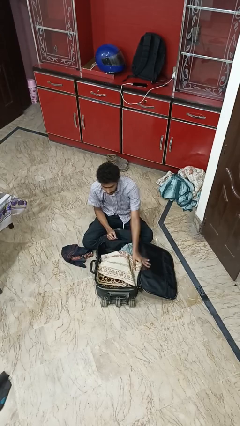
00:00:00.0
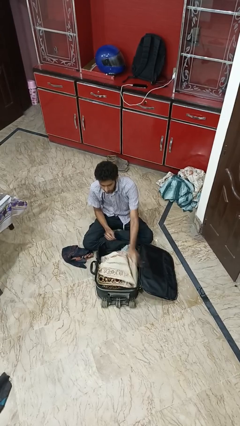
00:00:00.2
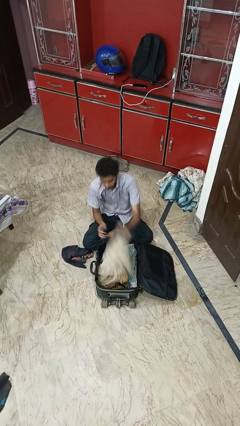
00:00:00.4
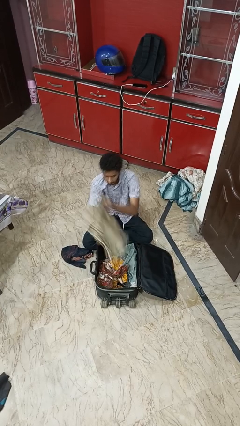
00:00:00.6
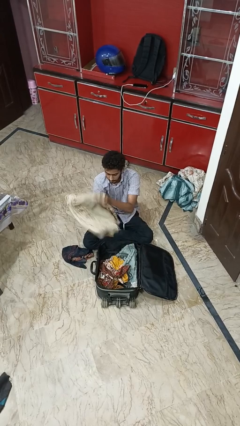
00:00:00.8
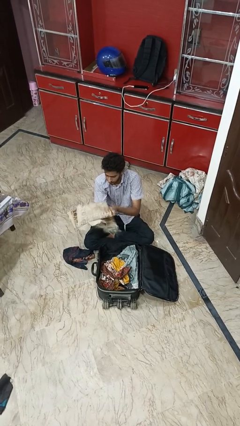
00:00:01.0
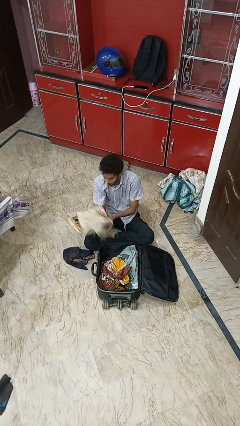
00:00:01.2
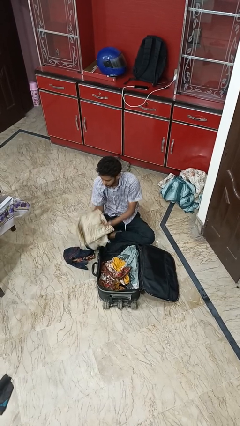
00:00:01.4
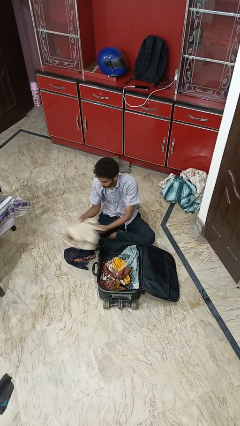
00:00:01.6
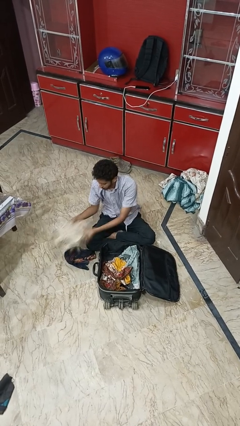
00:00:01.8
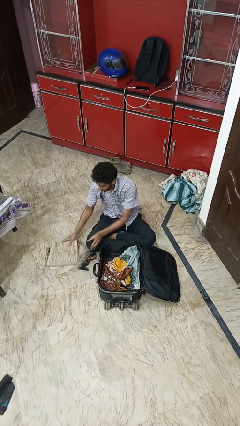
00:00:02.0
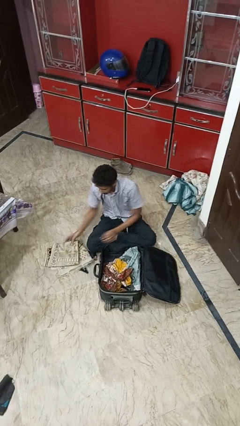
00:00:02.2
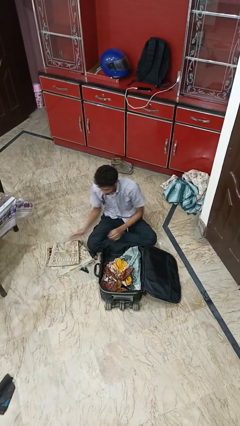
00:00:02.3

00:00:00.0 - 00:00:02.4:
person unloads clothes from suitcase

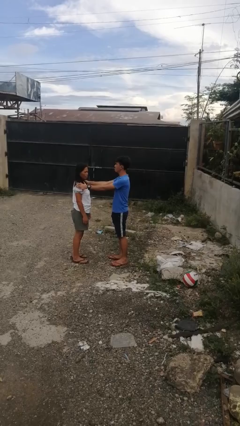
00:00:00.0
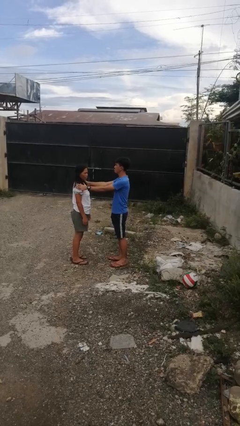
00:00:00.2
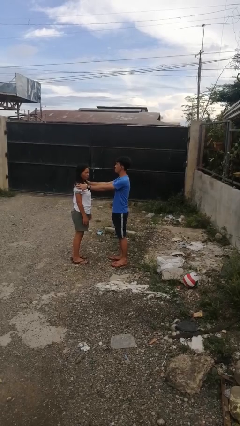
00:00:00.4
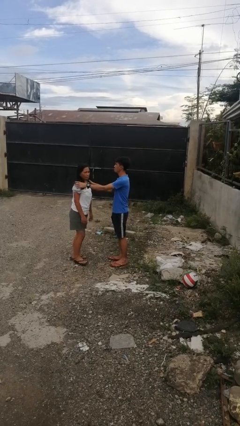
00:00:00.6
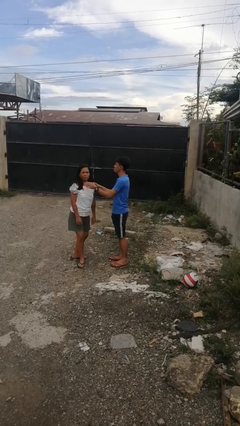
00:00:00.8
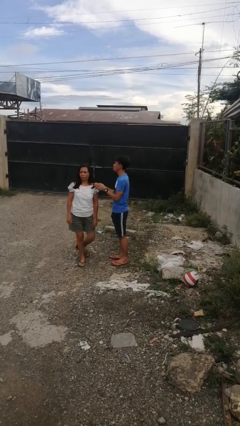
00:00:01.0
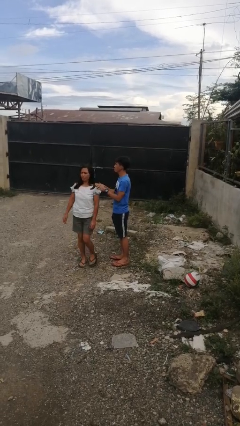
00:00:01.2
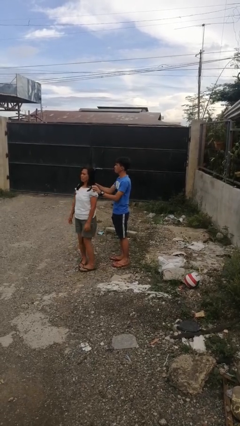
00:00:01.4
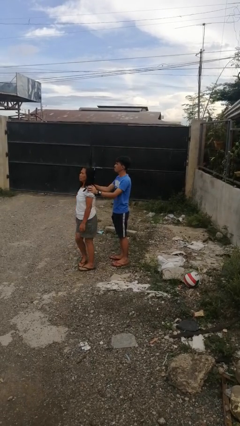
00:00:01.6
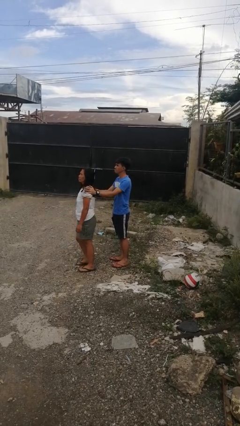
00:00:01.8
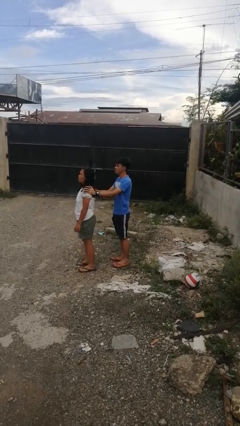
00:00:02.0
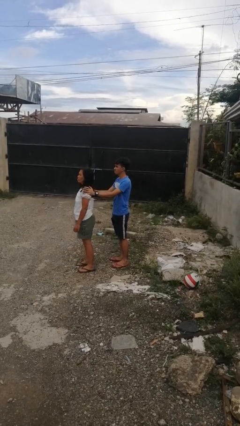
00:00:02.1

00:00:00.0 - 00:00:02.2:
person spins person around

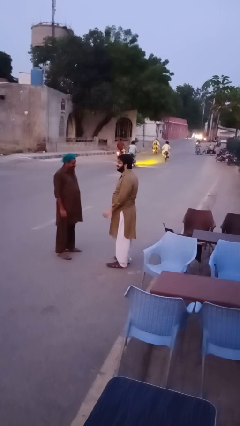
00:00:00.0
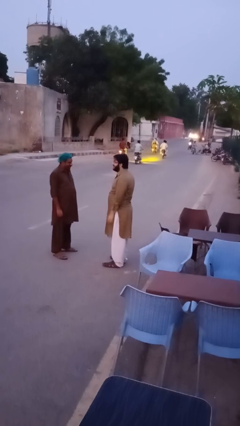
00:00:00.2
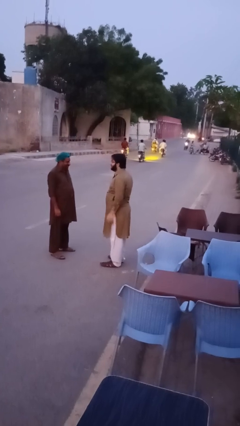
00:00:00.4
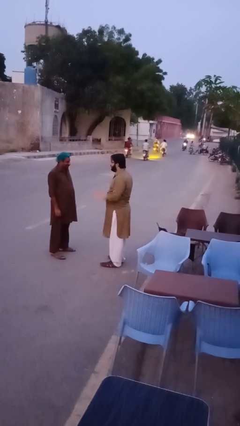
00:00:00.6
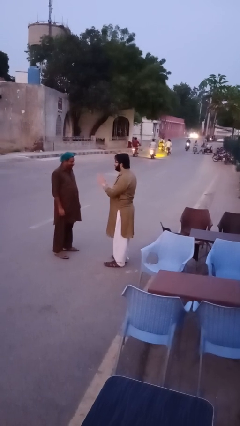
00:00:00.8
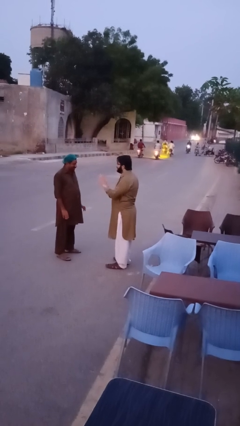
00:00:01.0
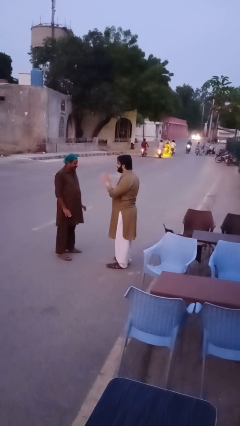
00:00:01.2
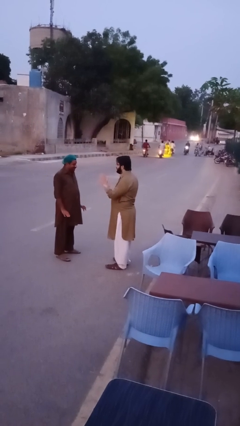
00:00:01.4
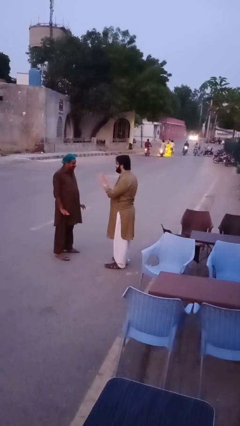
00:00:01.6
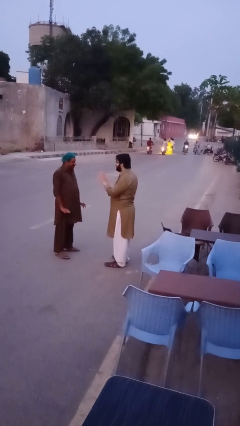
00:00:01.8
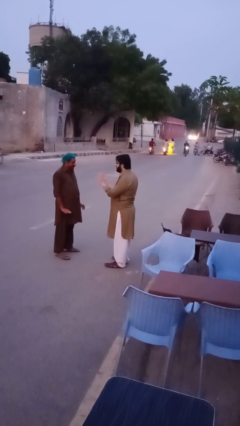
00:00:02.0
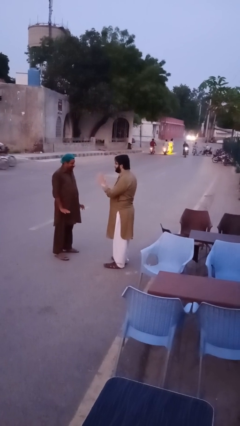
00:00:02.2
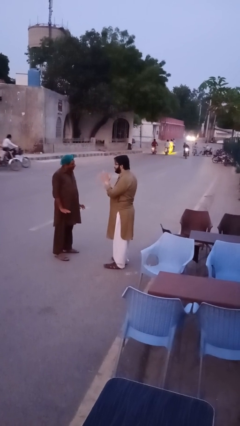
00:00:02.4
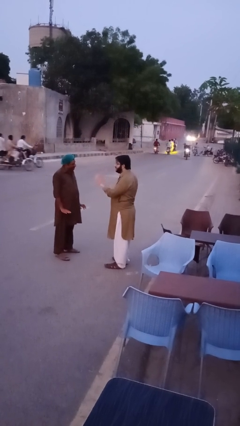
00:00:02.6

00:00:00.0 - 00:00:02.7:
person talks to person

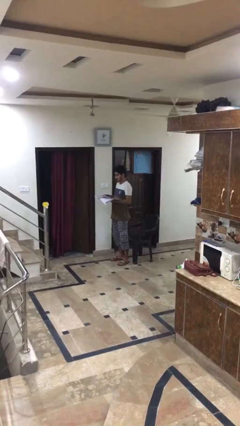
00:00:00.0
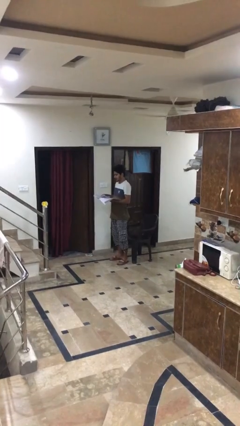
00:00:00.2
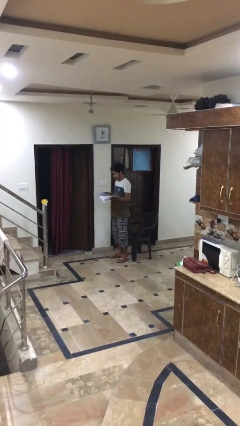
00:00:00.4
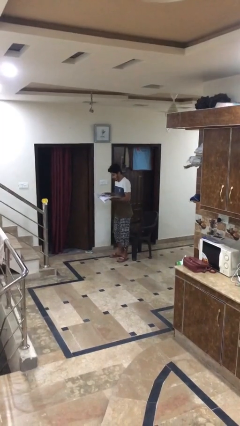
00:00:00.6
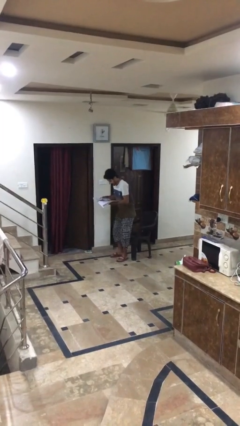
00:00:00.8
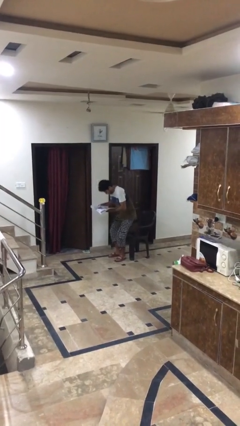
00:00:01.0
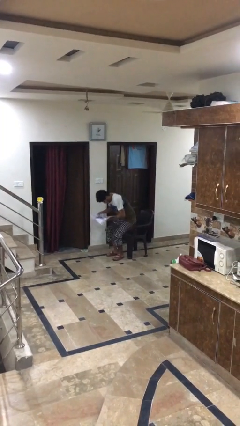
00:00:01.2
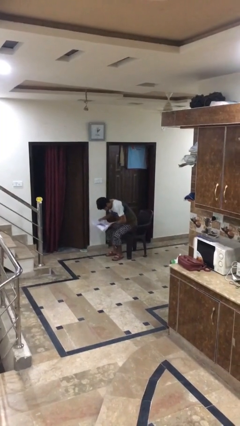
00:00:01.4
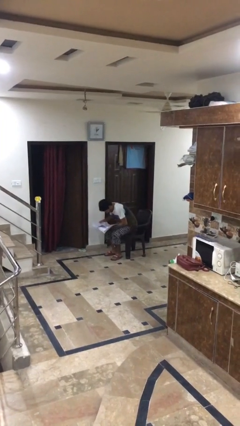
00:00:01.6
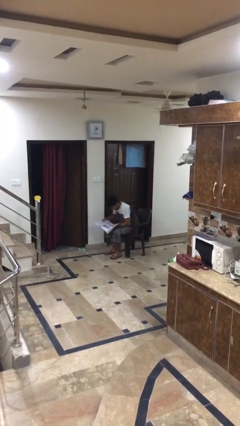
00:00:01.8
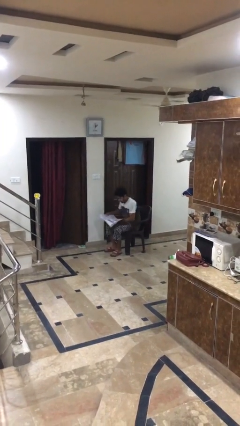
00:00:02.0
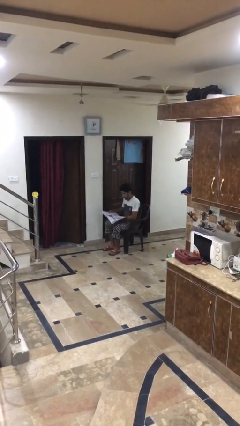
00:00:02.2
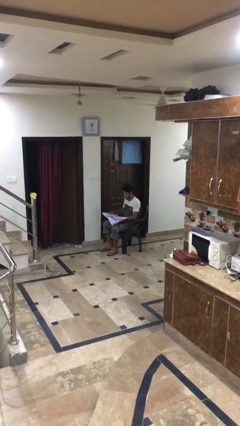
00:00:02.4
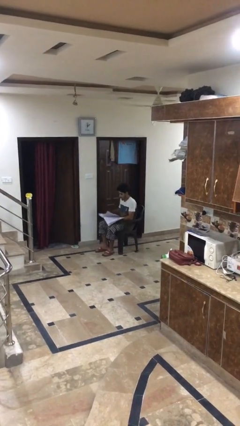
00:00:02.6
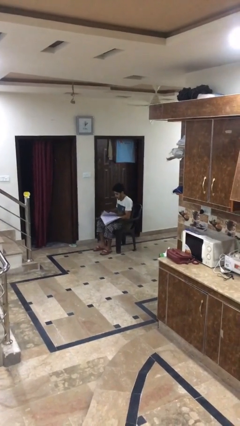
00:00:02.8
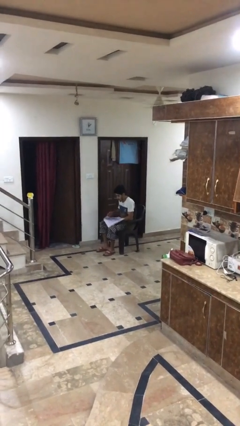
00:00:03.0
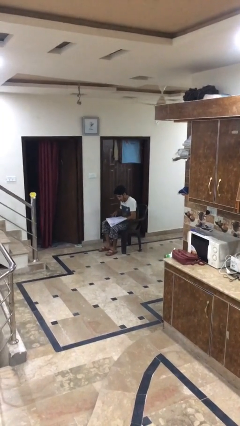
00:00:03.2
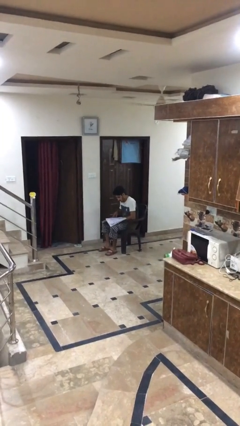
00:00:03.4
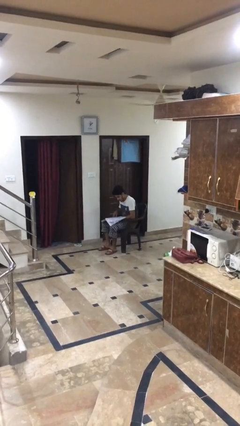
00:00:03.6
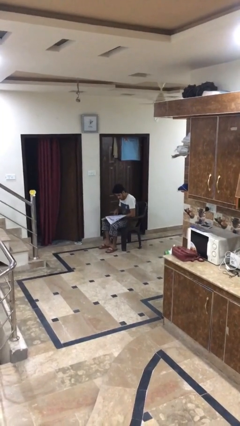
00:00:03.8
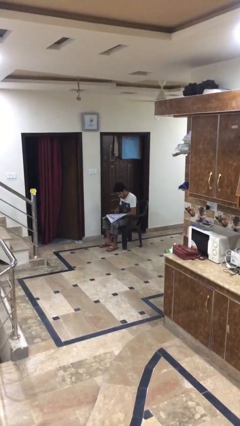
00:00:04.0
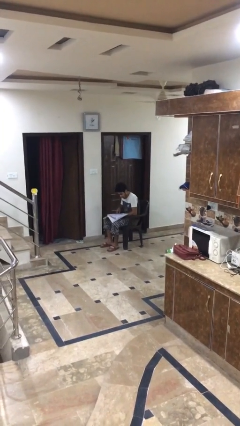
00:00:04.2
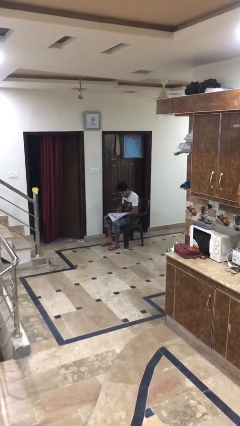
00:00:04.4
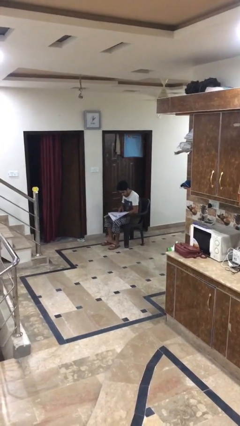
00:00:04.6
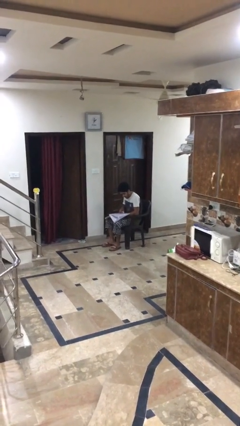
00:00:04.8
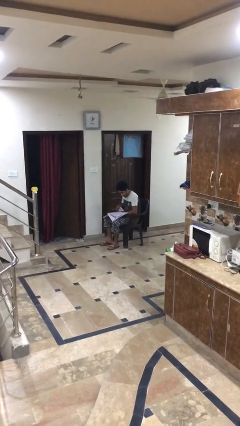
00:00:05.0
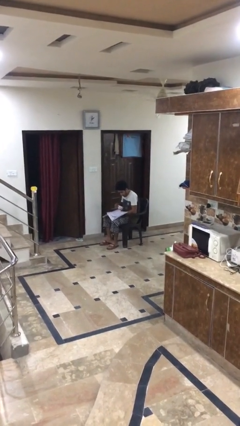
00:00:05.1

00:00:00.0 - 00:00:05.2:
person sits down

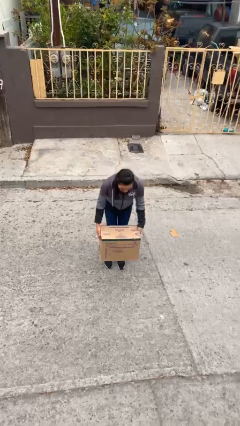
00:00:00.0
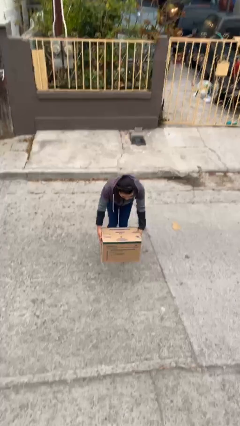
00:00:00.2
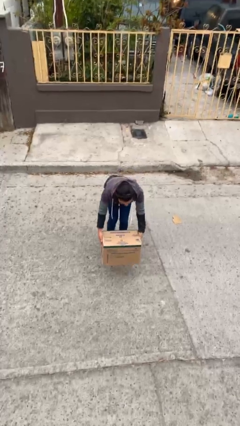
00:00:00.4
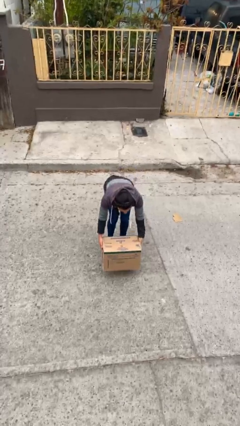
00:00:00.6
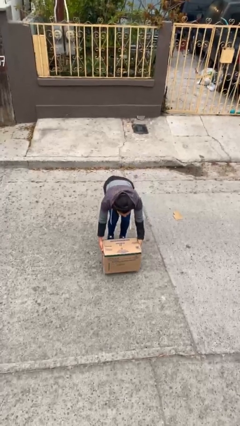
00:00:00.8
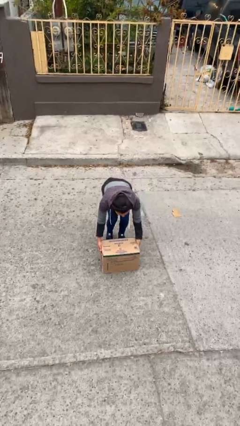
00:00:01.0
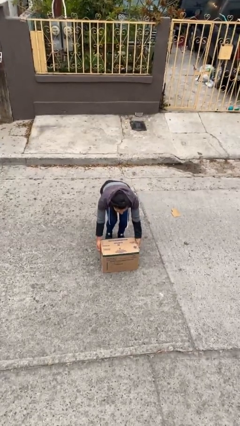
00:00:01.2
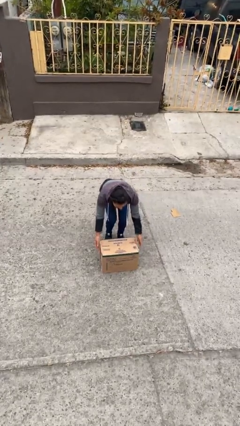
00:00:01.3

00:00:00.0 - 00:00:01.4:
person puts down object on floor

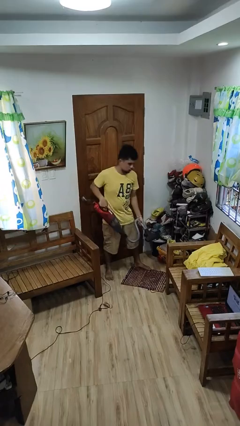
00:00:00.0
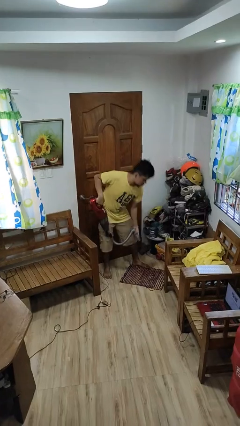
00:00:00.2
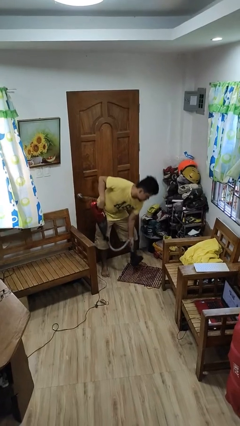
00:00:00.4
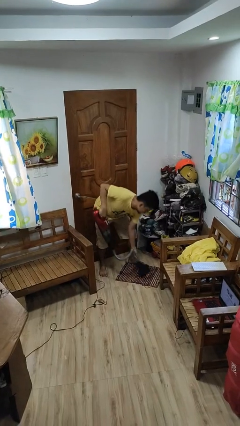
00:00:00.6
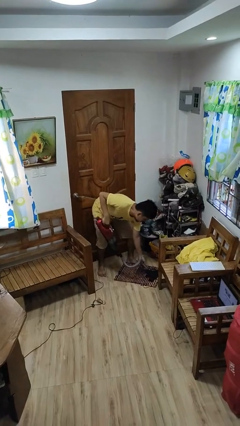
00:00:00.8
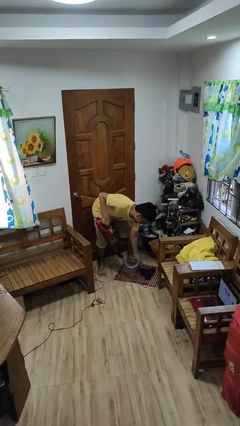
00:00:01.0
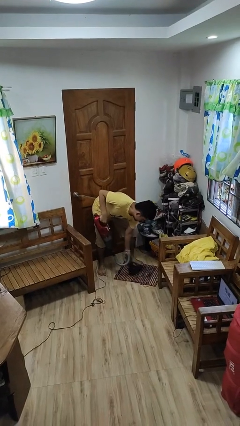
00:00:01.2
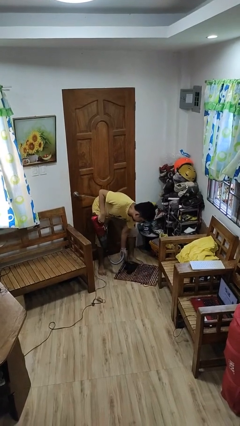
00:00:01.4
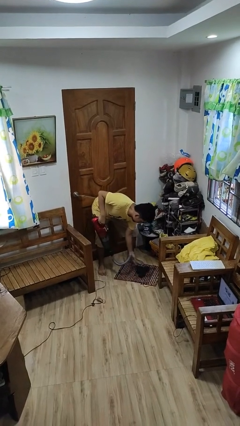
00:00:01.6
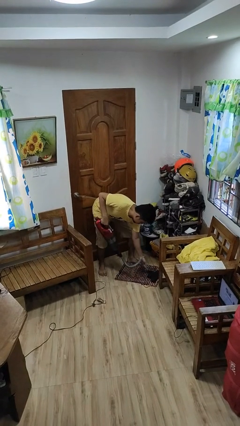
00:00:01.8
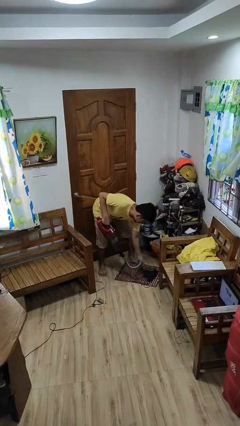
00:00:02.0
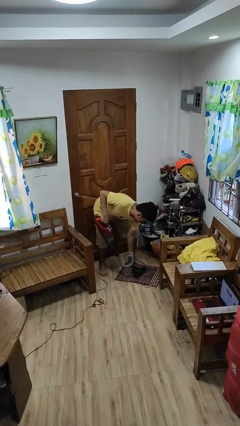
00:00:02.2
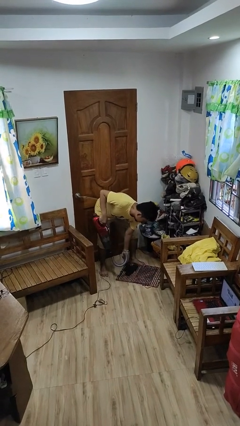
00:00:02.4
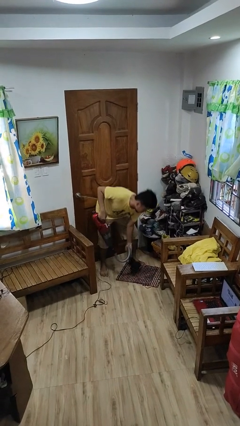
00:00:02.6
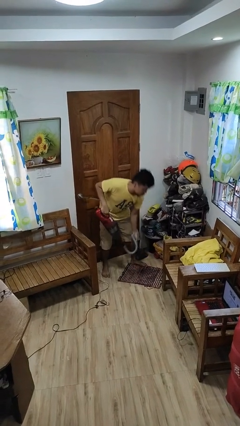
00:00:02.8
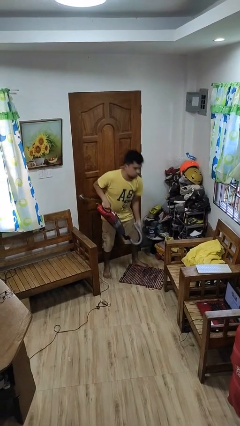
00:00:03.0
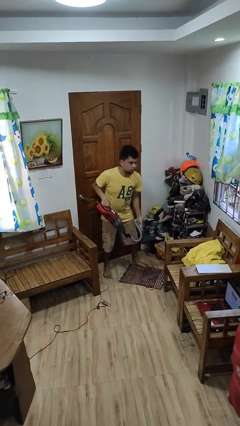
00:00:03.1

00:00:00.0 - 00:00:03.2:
person vacuums carpet

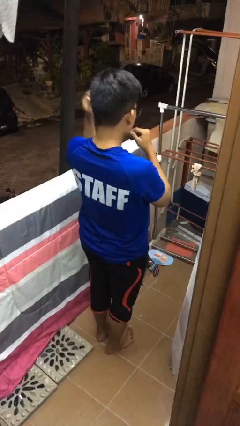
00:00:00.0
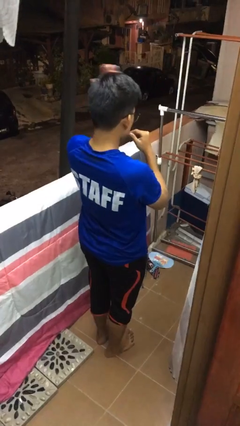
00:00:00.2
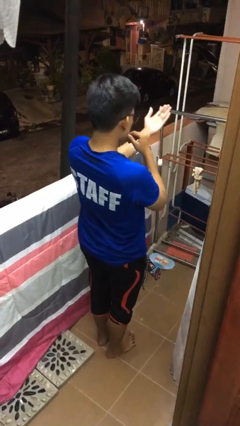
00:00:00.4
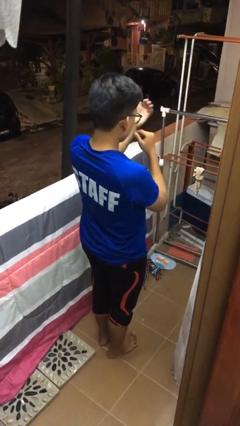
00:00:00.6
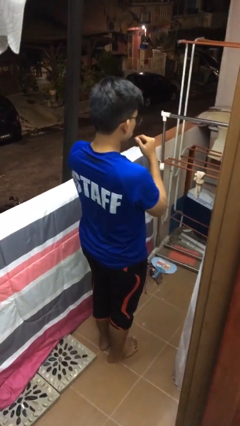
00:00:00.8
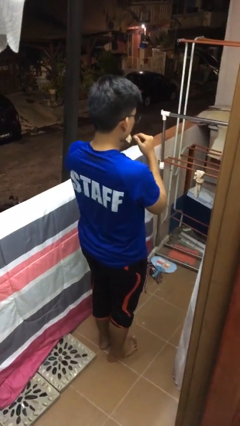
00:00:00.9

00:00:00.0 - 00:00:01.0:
person karate chop
